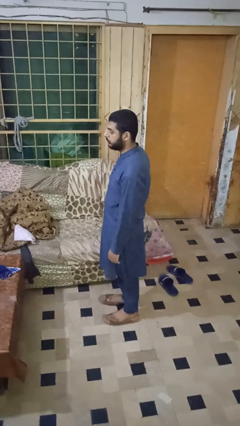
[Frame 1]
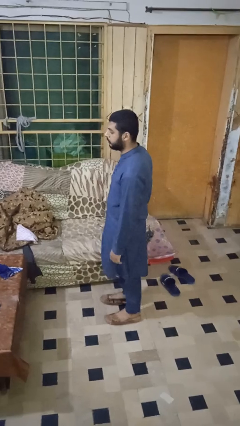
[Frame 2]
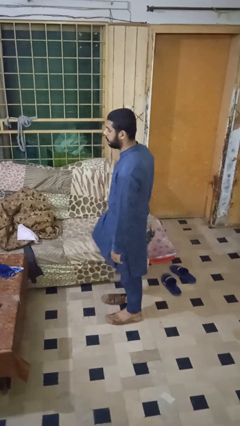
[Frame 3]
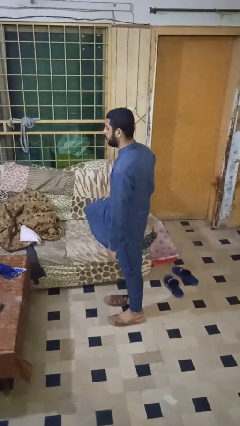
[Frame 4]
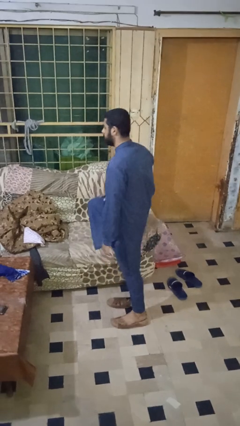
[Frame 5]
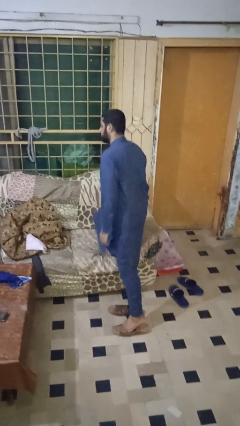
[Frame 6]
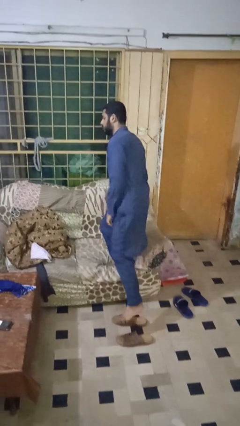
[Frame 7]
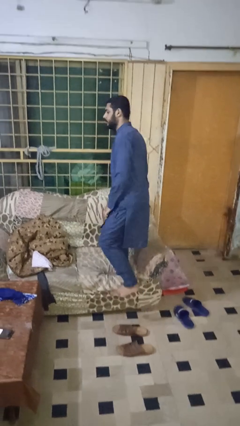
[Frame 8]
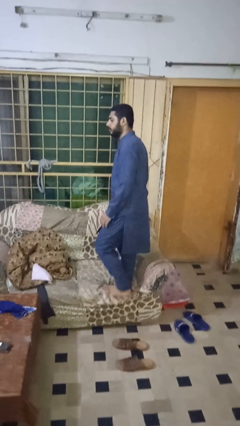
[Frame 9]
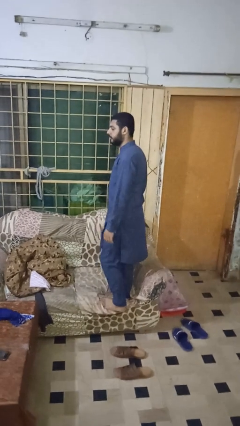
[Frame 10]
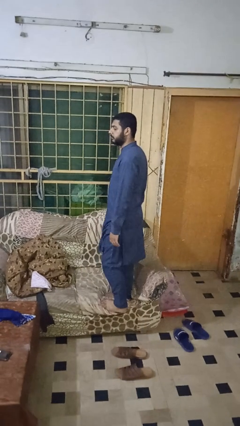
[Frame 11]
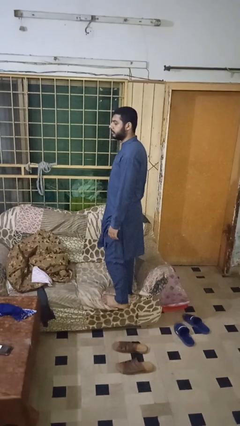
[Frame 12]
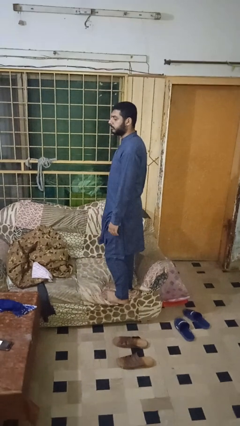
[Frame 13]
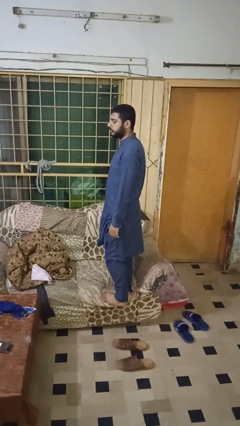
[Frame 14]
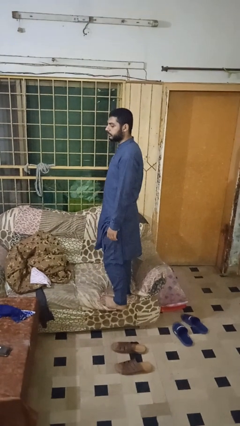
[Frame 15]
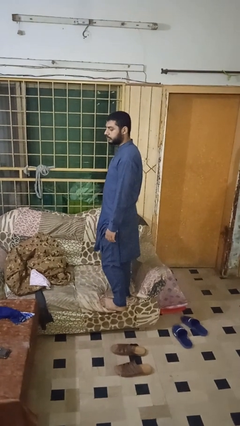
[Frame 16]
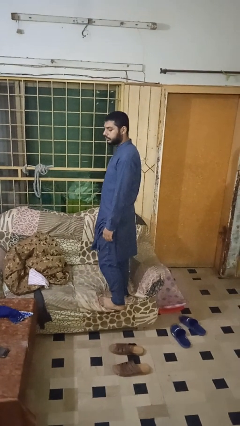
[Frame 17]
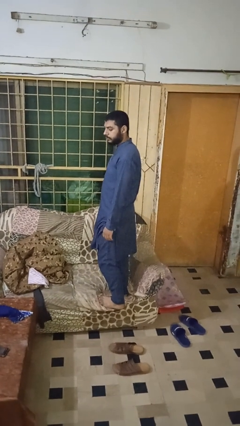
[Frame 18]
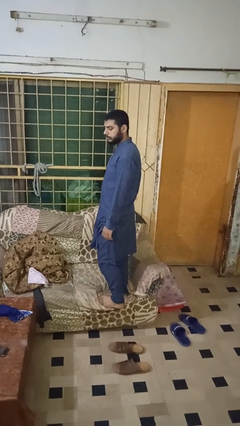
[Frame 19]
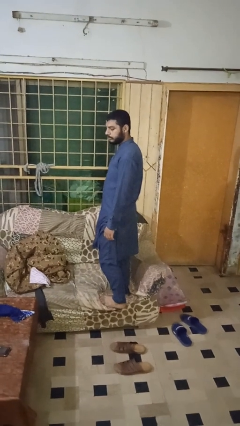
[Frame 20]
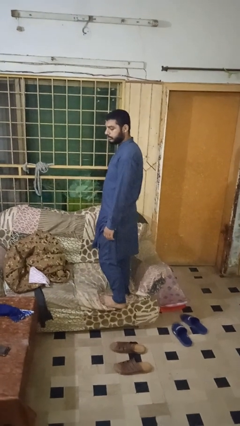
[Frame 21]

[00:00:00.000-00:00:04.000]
person climbs on couch

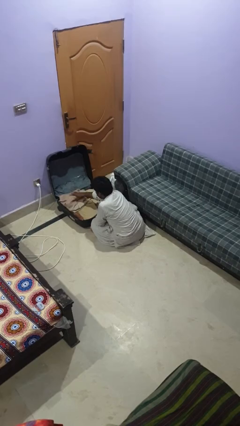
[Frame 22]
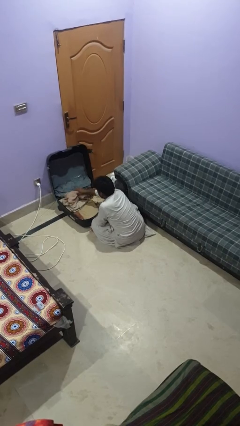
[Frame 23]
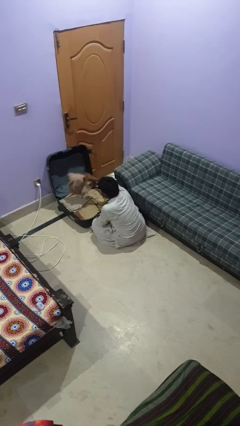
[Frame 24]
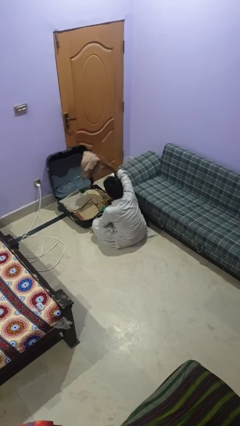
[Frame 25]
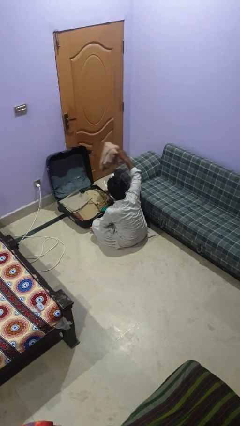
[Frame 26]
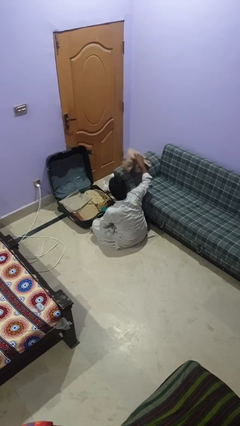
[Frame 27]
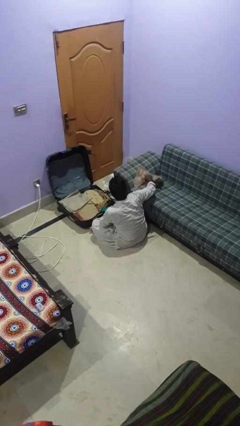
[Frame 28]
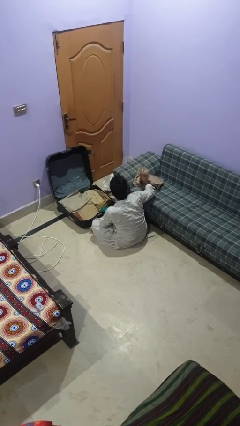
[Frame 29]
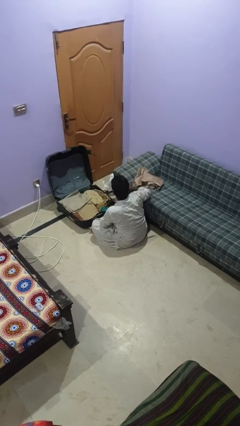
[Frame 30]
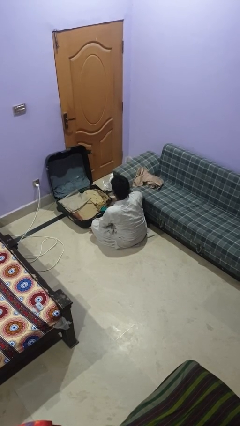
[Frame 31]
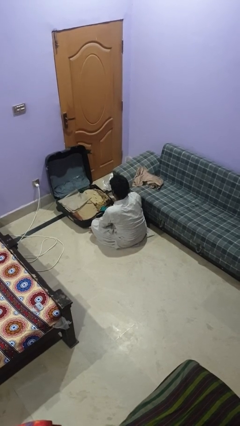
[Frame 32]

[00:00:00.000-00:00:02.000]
person unloads clothes from suitcase

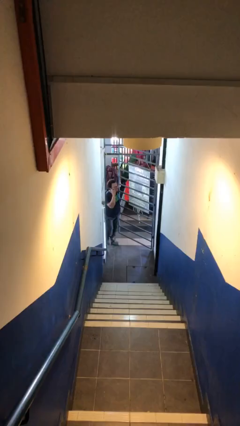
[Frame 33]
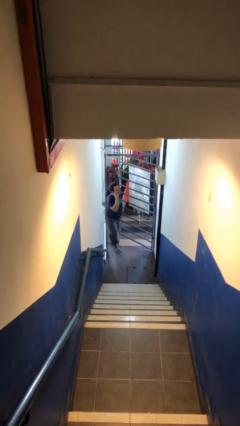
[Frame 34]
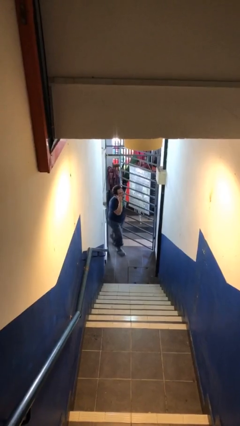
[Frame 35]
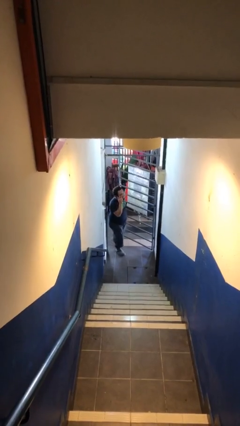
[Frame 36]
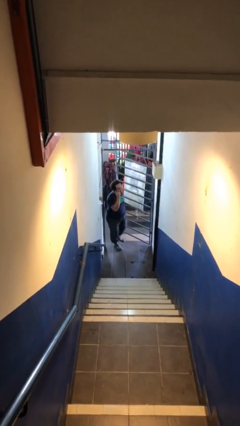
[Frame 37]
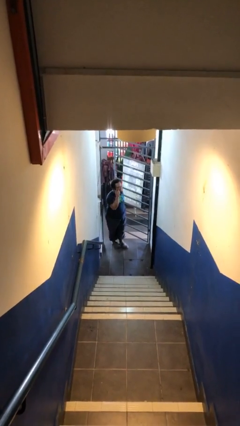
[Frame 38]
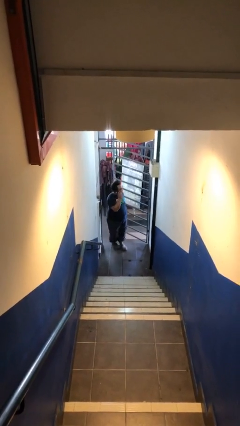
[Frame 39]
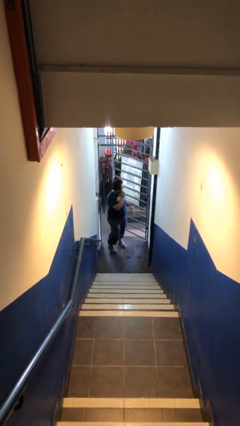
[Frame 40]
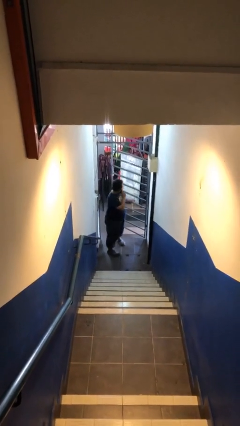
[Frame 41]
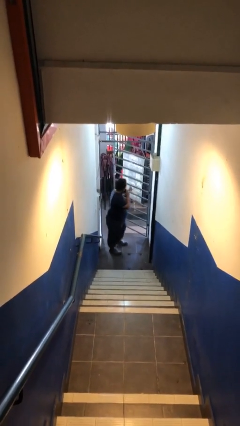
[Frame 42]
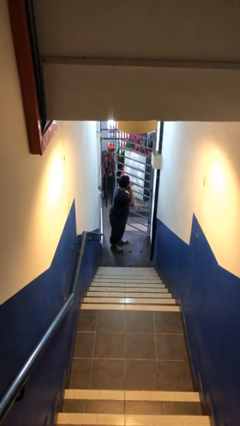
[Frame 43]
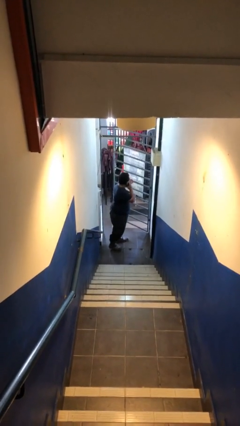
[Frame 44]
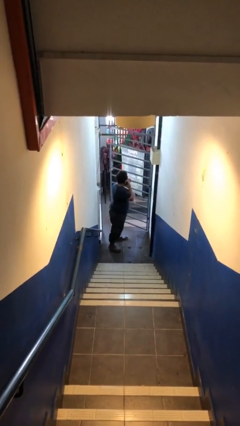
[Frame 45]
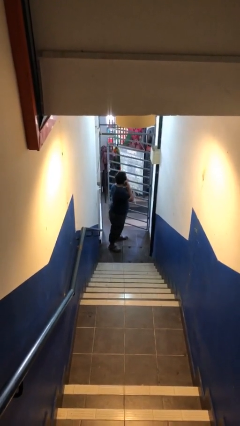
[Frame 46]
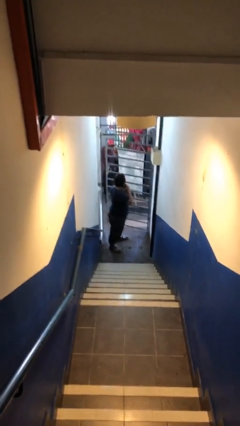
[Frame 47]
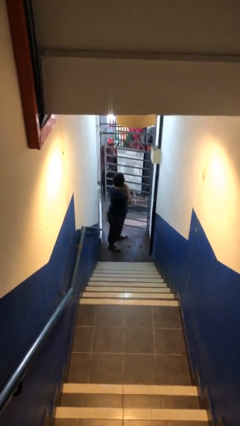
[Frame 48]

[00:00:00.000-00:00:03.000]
person enters scene through structure

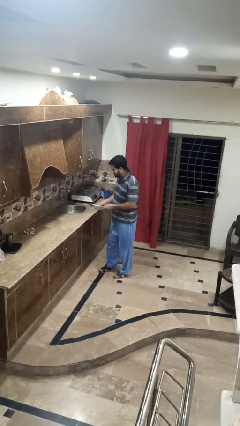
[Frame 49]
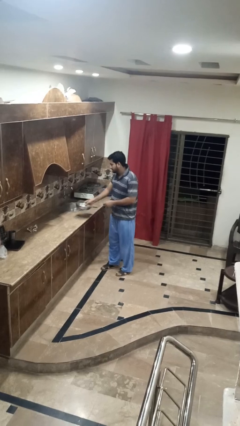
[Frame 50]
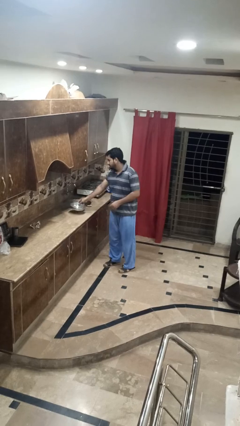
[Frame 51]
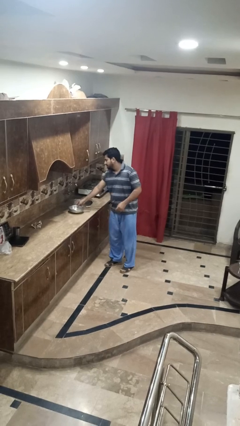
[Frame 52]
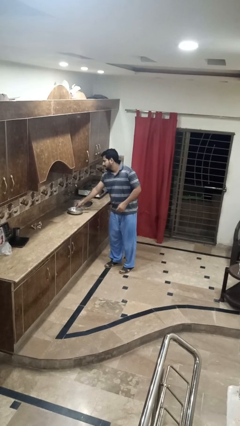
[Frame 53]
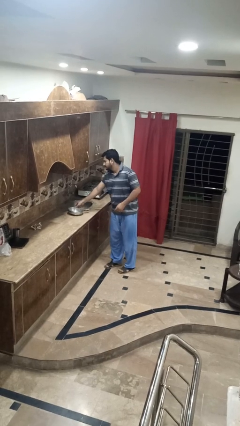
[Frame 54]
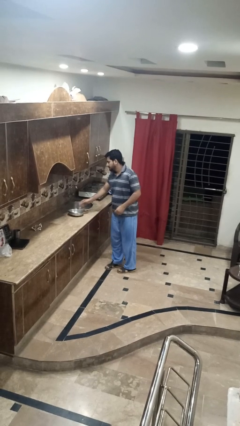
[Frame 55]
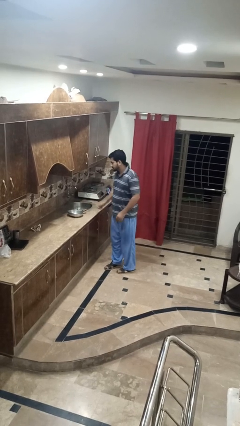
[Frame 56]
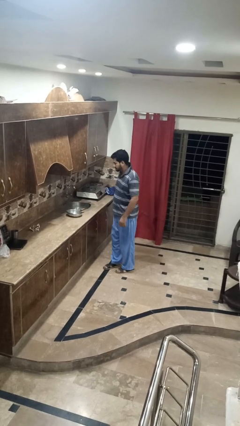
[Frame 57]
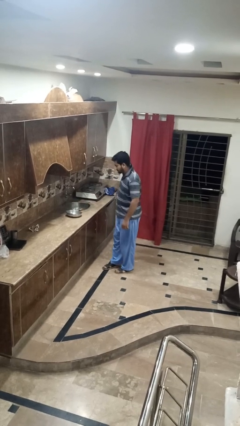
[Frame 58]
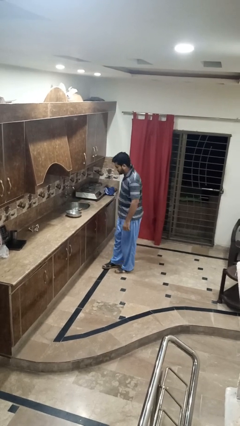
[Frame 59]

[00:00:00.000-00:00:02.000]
person puts down object on countertop

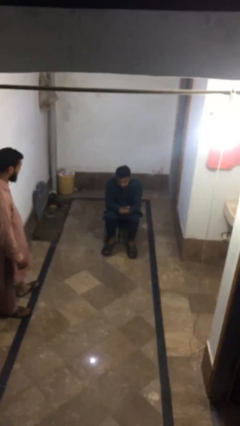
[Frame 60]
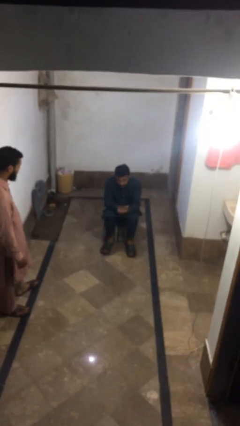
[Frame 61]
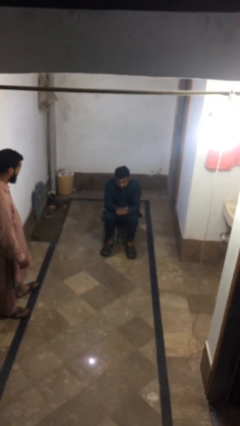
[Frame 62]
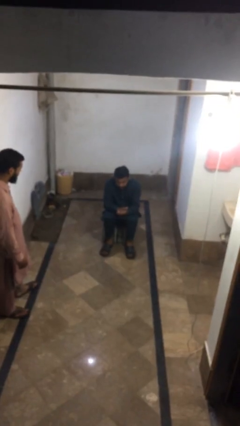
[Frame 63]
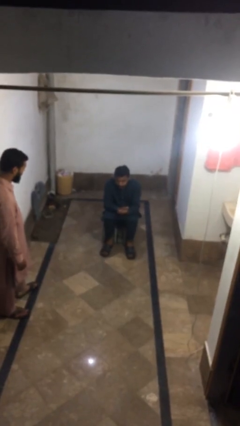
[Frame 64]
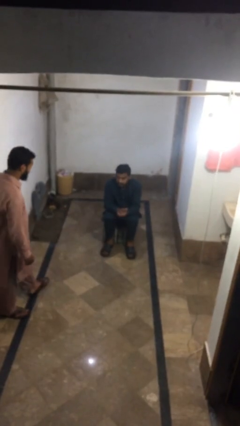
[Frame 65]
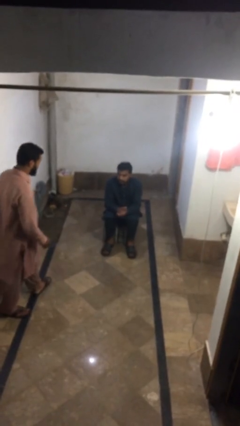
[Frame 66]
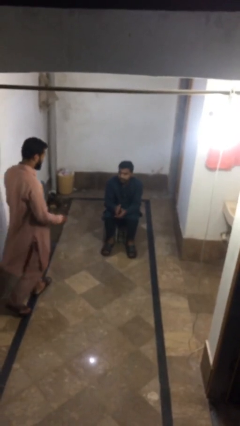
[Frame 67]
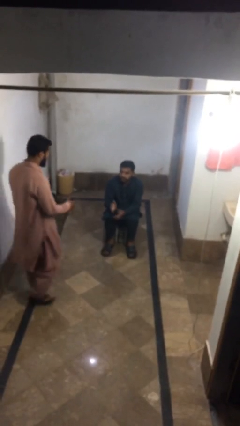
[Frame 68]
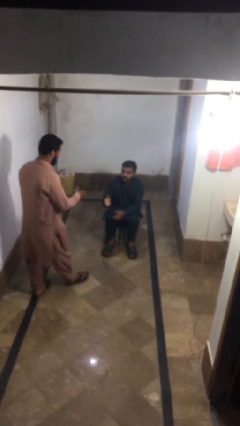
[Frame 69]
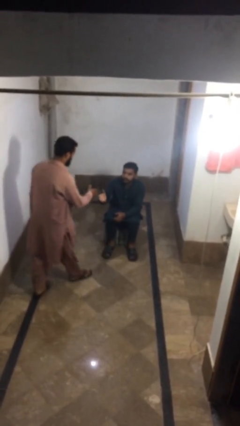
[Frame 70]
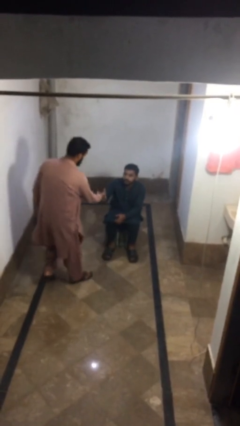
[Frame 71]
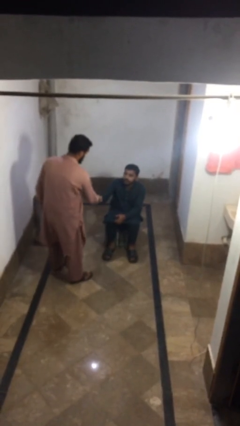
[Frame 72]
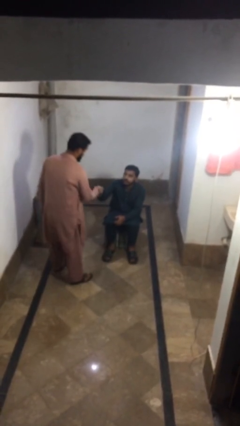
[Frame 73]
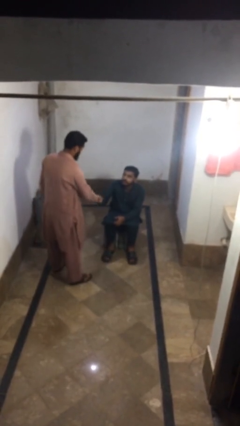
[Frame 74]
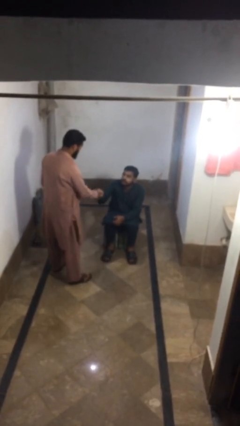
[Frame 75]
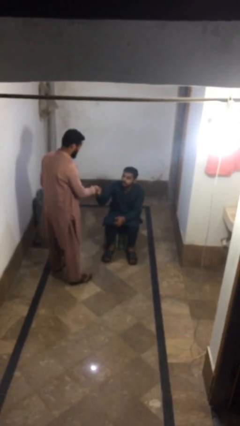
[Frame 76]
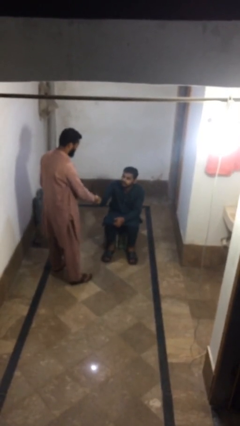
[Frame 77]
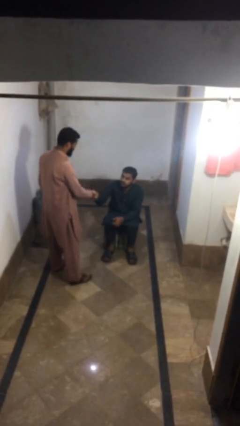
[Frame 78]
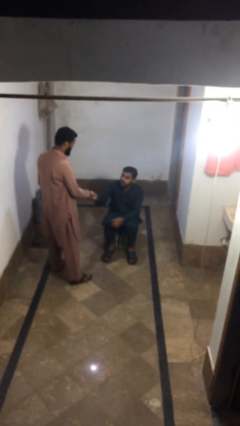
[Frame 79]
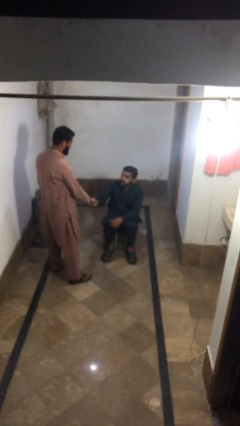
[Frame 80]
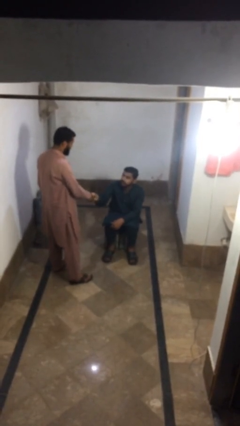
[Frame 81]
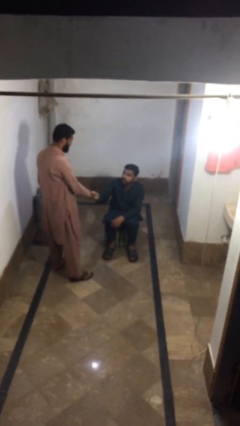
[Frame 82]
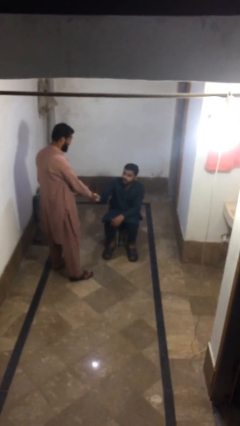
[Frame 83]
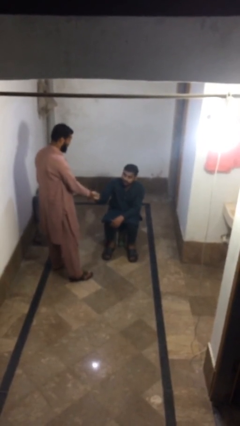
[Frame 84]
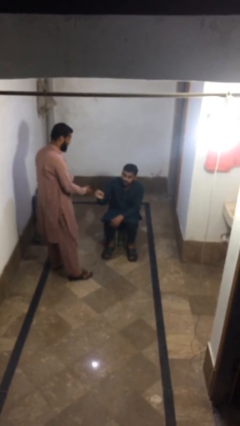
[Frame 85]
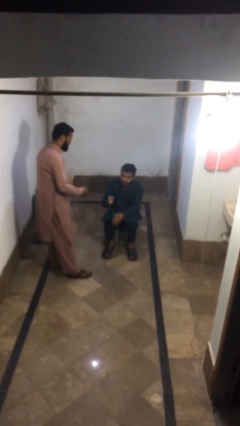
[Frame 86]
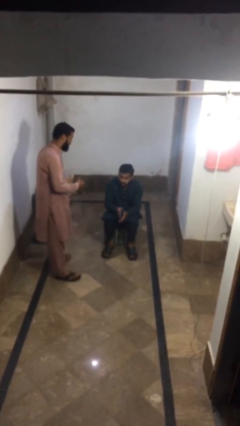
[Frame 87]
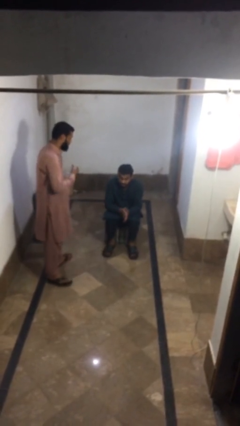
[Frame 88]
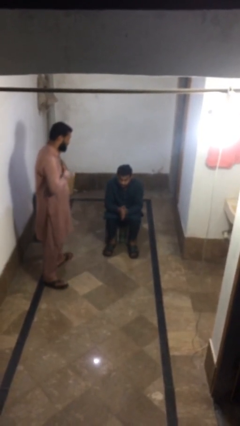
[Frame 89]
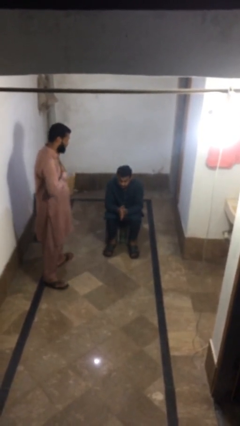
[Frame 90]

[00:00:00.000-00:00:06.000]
person shakes hand

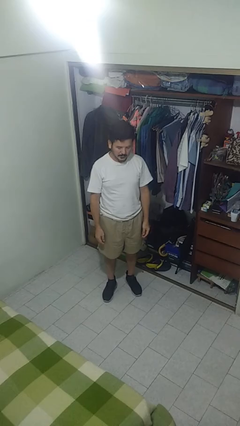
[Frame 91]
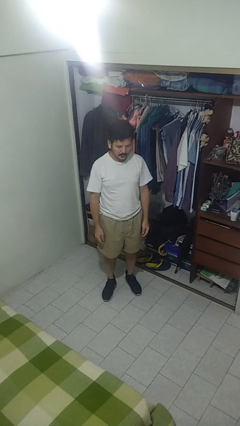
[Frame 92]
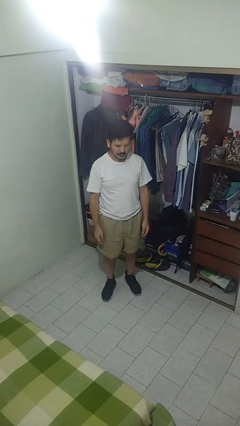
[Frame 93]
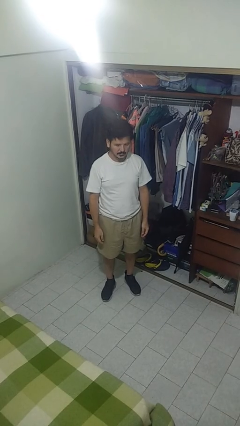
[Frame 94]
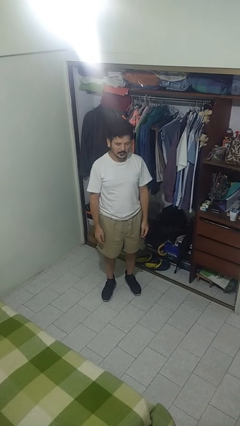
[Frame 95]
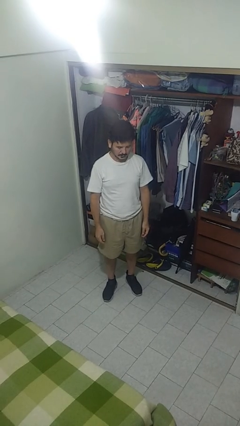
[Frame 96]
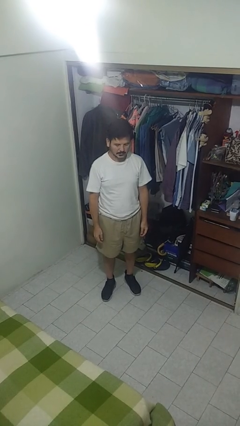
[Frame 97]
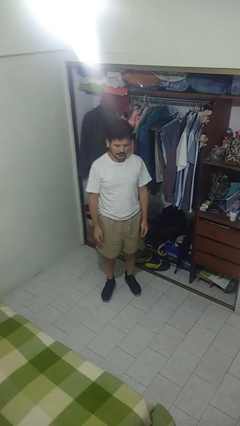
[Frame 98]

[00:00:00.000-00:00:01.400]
person nods head
